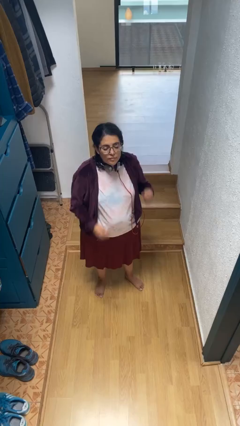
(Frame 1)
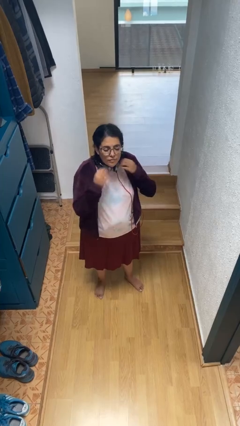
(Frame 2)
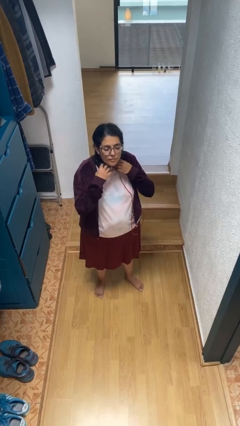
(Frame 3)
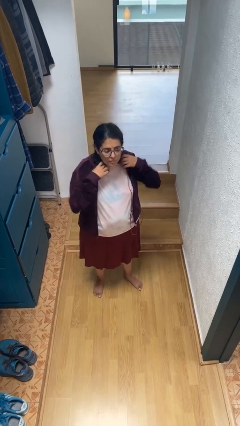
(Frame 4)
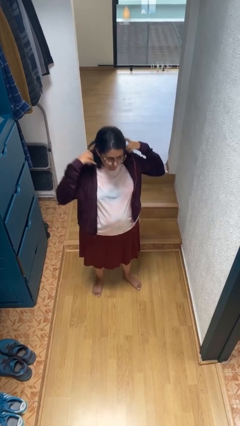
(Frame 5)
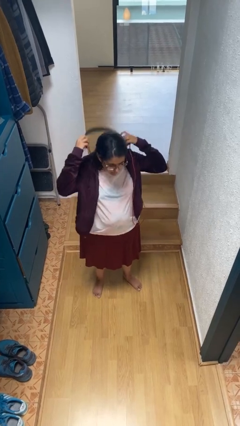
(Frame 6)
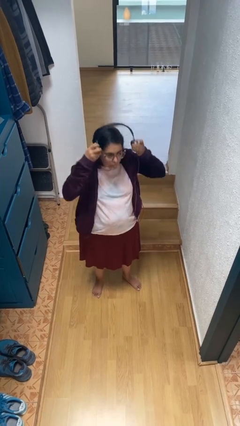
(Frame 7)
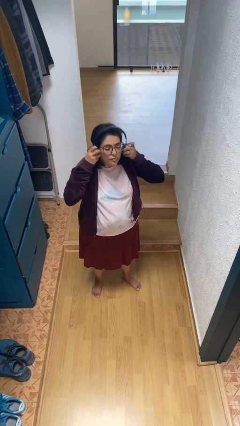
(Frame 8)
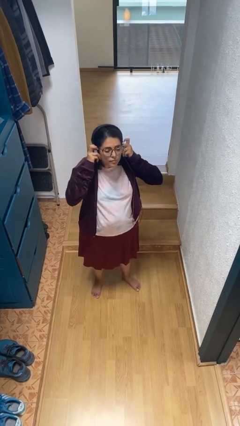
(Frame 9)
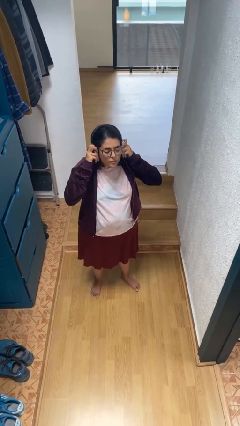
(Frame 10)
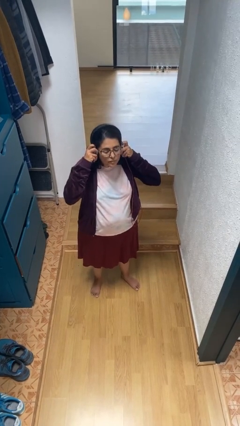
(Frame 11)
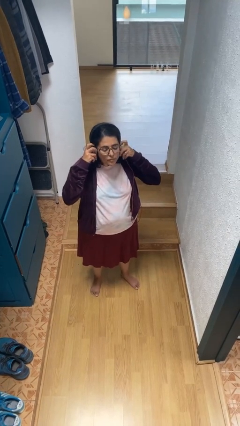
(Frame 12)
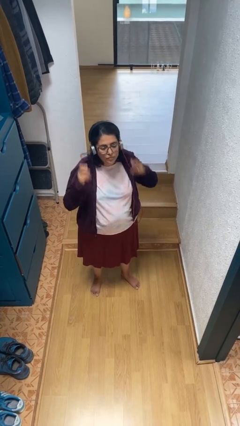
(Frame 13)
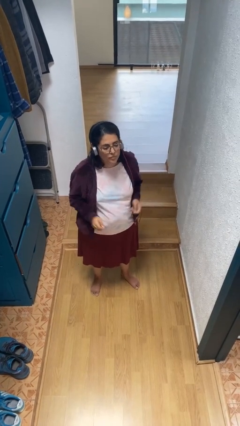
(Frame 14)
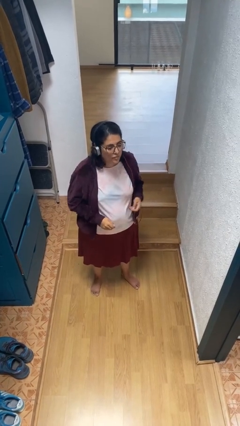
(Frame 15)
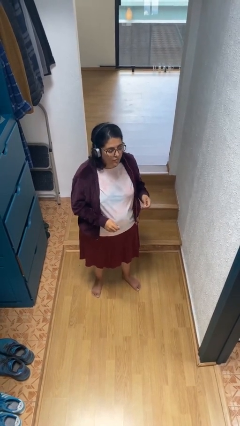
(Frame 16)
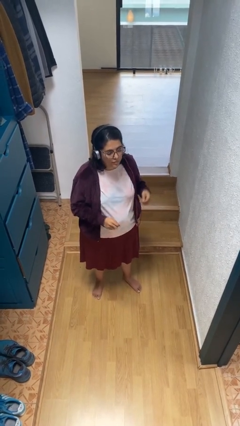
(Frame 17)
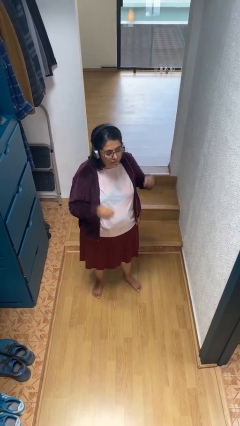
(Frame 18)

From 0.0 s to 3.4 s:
person puts on headphones

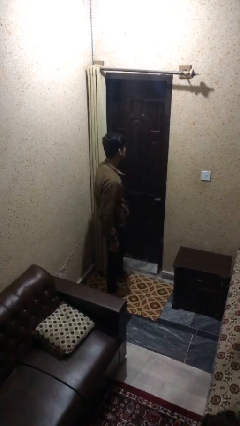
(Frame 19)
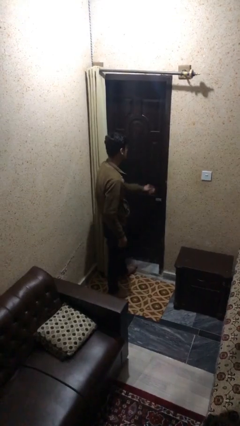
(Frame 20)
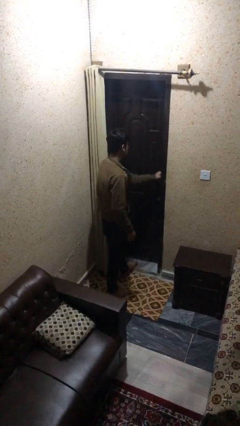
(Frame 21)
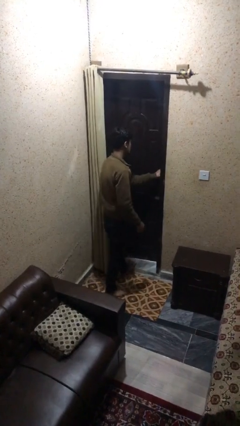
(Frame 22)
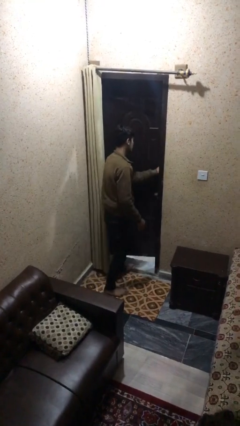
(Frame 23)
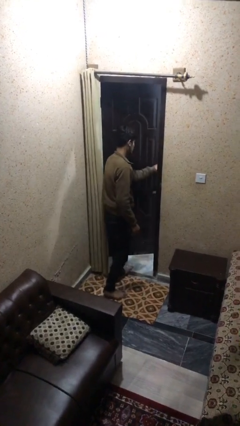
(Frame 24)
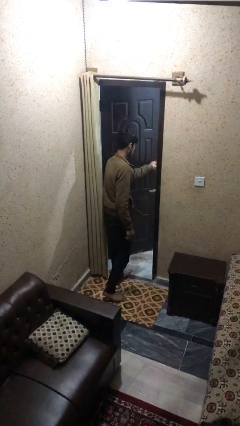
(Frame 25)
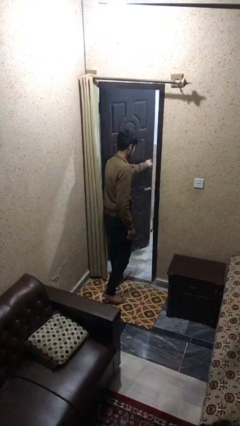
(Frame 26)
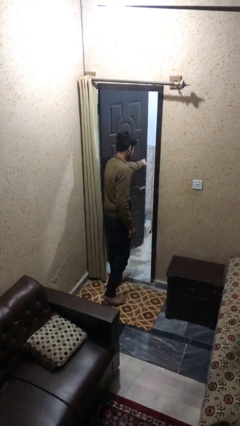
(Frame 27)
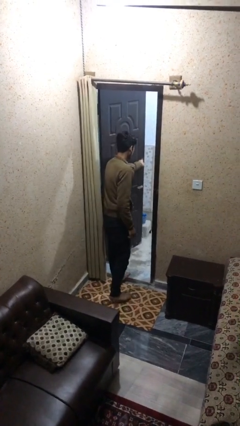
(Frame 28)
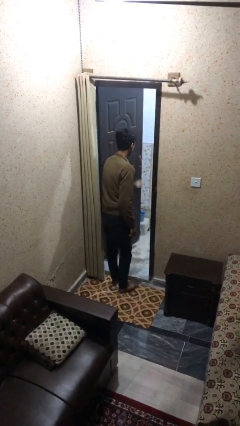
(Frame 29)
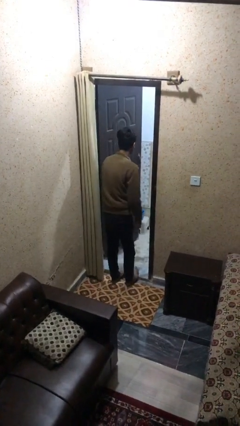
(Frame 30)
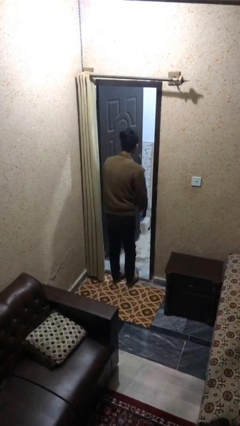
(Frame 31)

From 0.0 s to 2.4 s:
person opens facility door

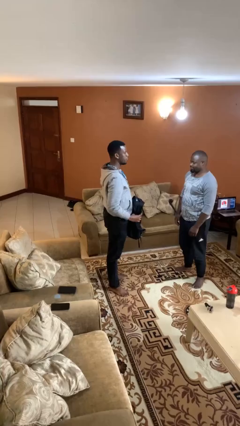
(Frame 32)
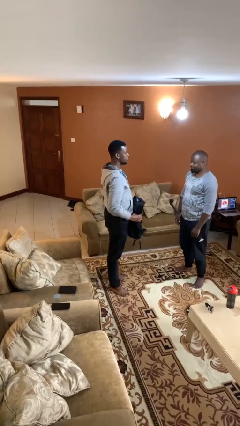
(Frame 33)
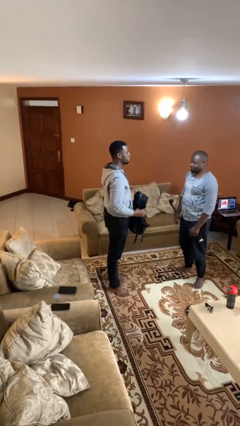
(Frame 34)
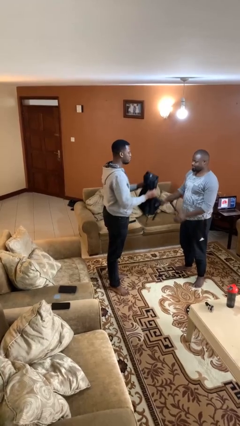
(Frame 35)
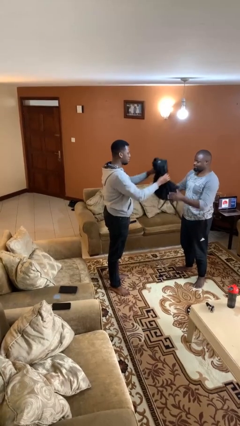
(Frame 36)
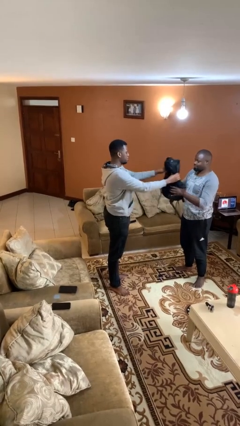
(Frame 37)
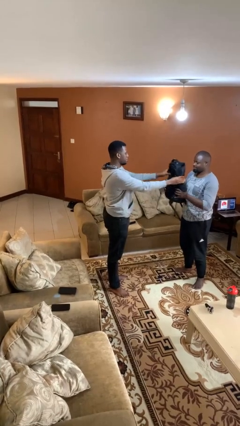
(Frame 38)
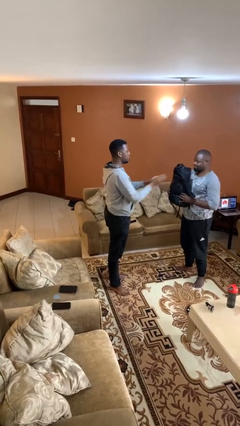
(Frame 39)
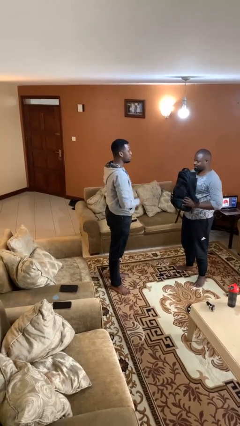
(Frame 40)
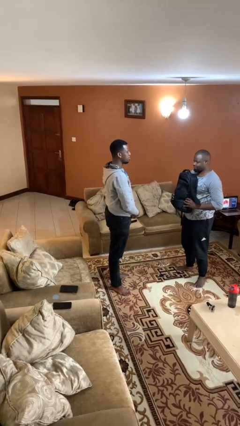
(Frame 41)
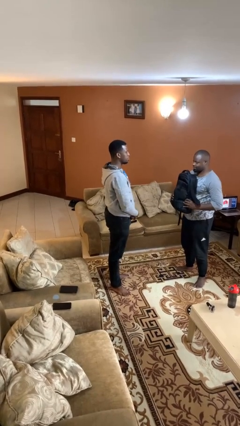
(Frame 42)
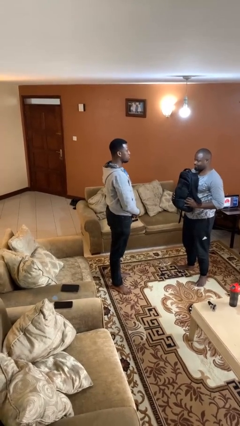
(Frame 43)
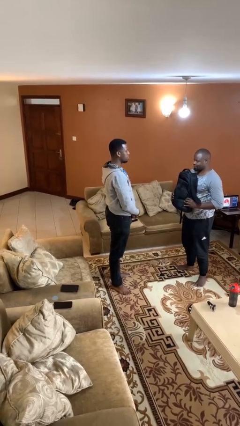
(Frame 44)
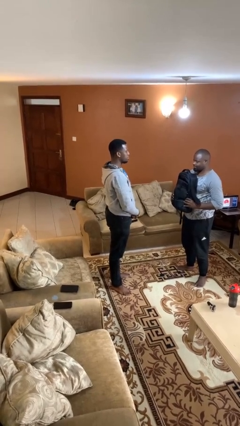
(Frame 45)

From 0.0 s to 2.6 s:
person transfers object to person

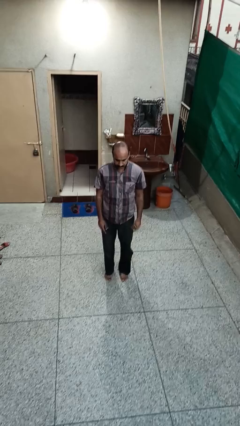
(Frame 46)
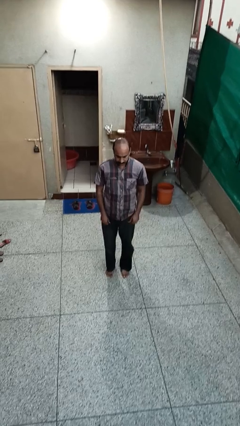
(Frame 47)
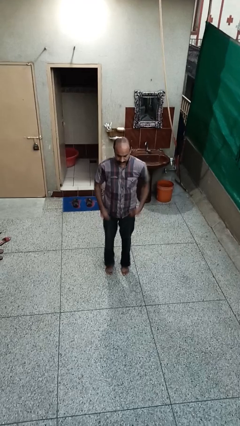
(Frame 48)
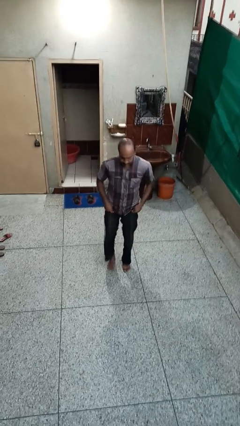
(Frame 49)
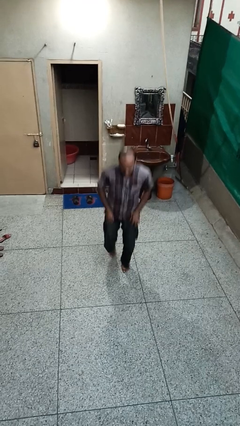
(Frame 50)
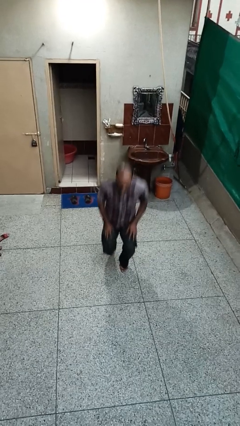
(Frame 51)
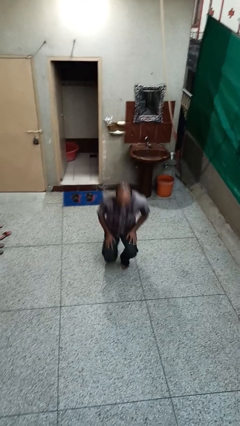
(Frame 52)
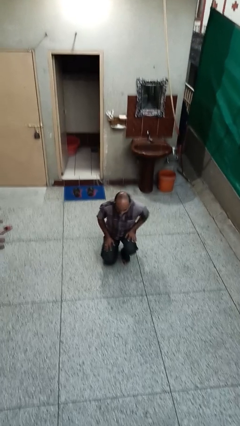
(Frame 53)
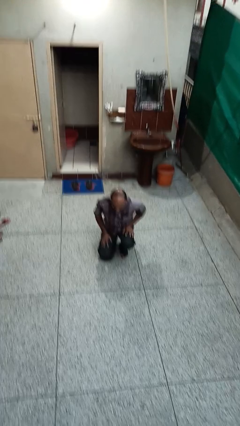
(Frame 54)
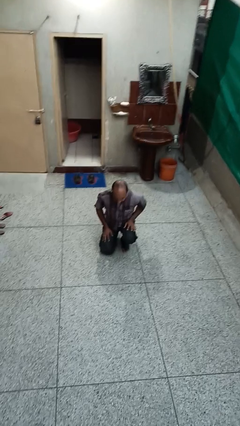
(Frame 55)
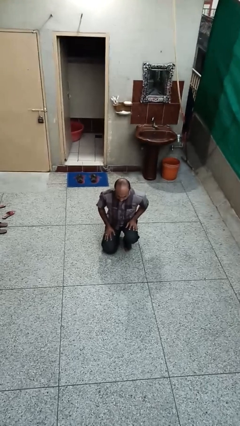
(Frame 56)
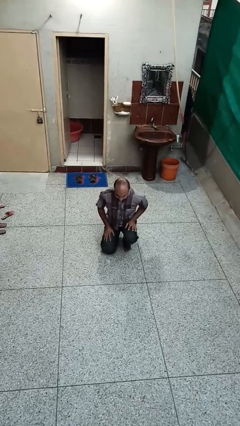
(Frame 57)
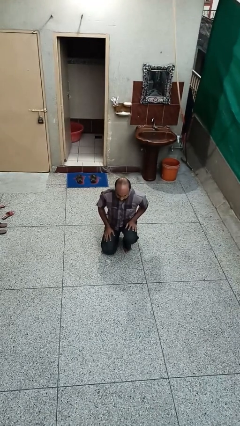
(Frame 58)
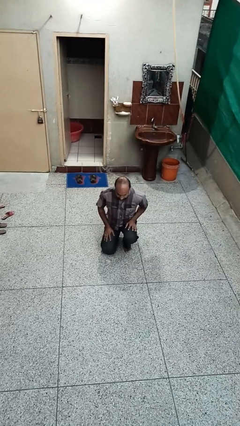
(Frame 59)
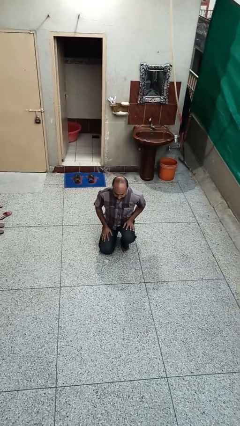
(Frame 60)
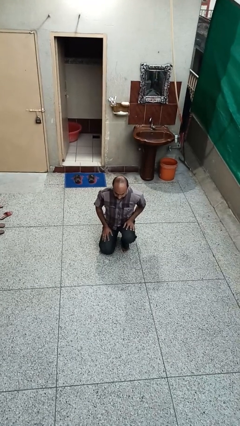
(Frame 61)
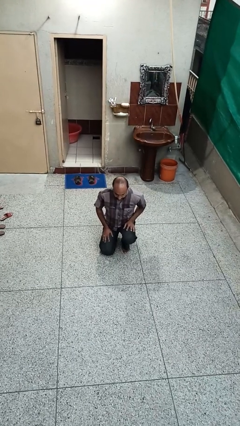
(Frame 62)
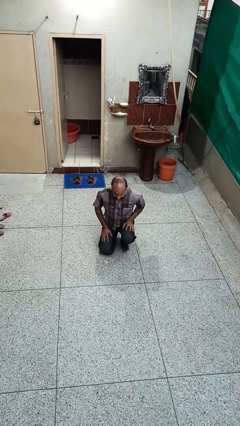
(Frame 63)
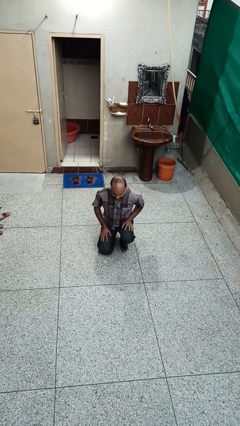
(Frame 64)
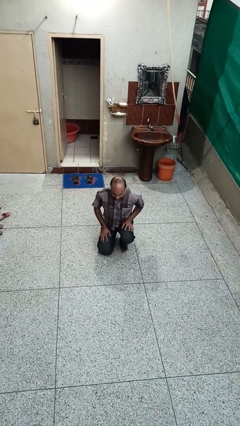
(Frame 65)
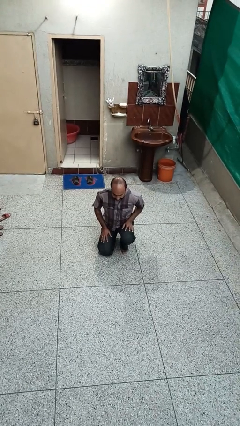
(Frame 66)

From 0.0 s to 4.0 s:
person kneels

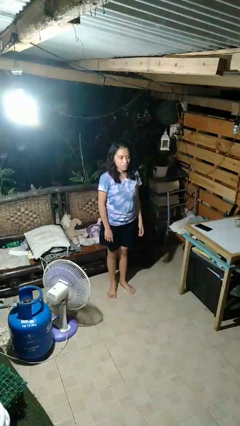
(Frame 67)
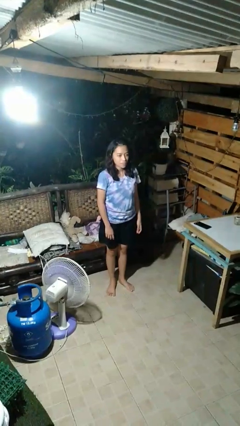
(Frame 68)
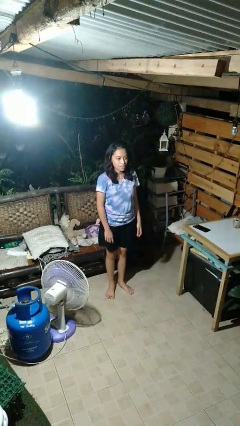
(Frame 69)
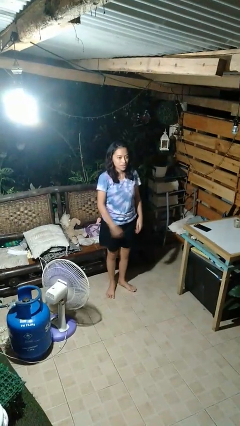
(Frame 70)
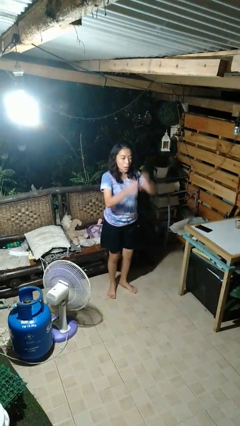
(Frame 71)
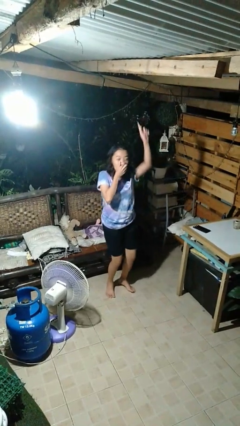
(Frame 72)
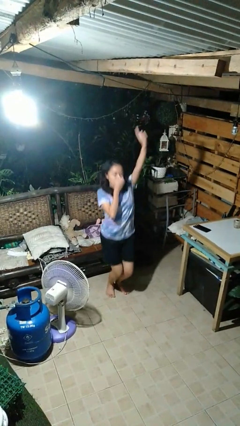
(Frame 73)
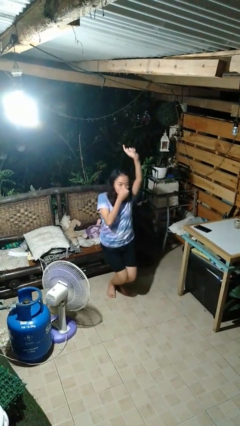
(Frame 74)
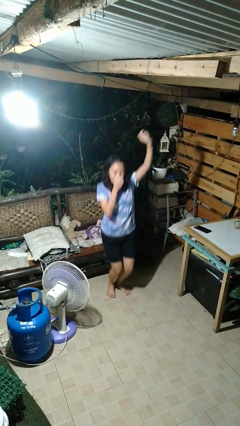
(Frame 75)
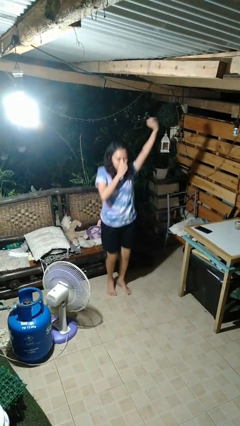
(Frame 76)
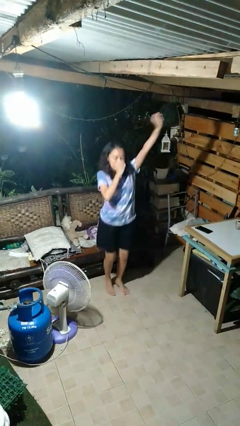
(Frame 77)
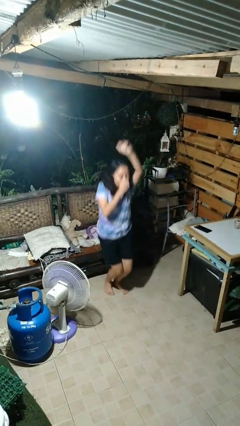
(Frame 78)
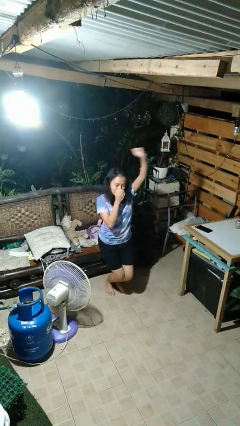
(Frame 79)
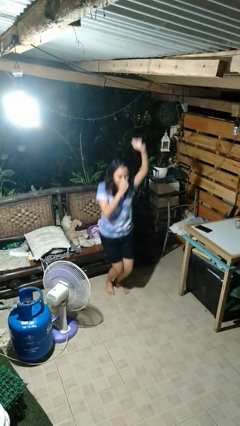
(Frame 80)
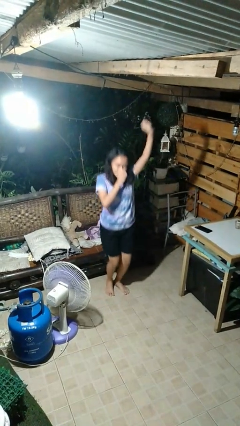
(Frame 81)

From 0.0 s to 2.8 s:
person dances in place

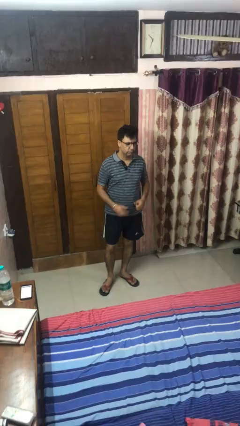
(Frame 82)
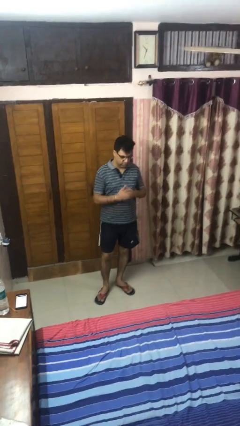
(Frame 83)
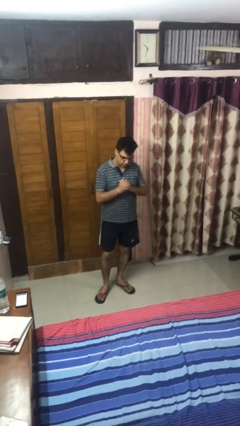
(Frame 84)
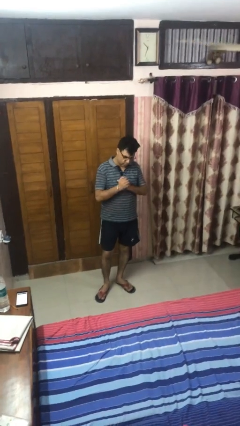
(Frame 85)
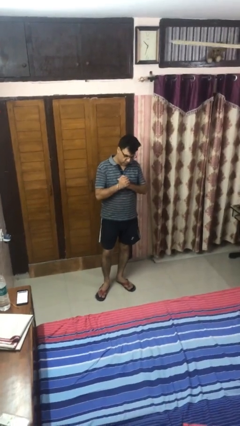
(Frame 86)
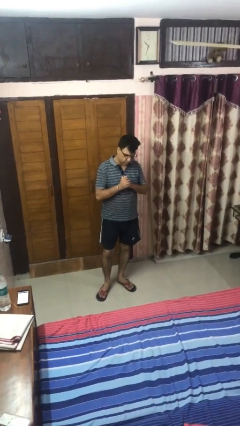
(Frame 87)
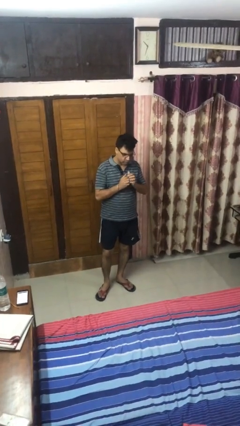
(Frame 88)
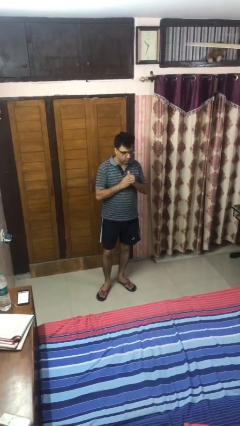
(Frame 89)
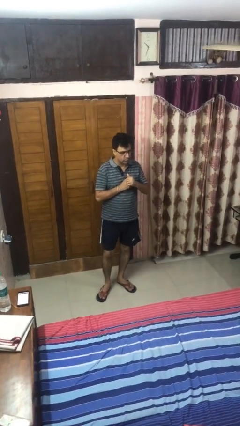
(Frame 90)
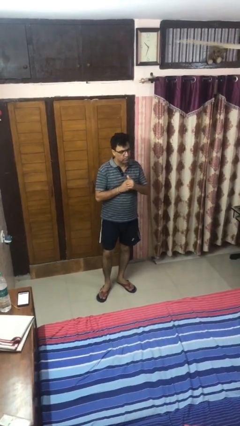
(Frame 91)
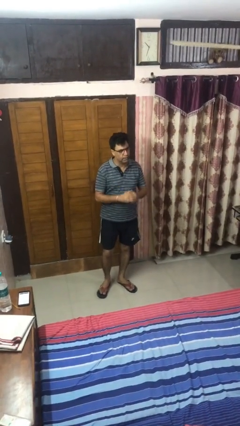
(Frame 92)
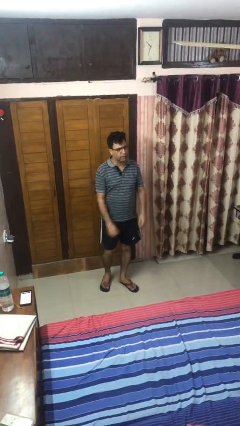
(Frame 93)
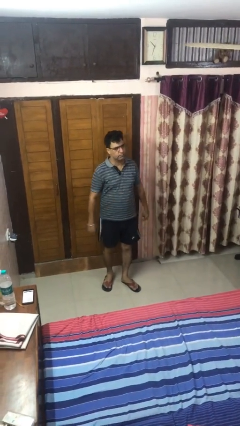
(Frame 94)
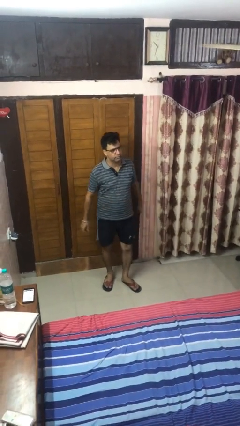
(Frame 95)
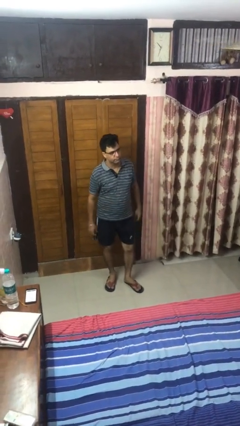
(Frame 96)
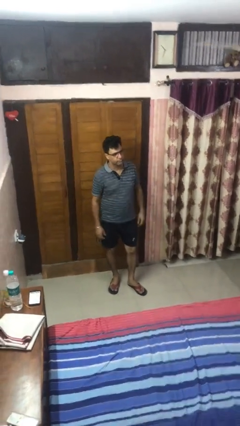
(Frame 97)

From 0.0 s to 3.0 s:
person cracks knuckles
